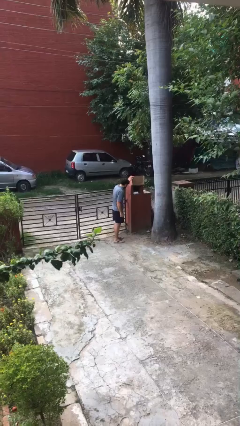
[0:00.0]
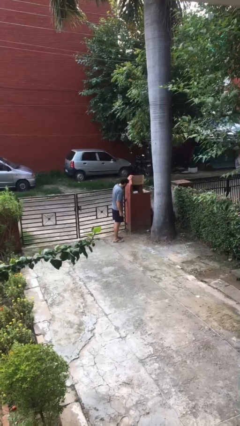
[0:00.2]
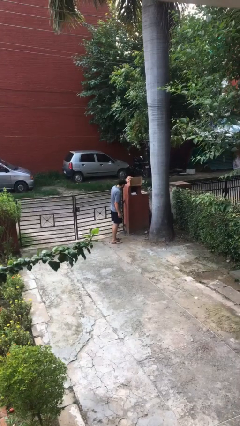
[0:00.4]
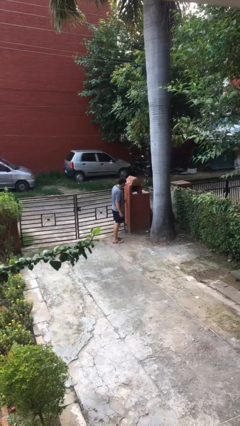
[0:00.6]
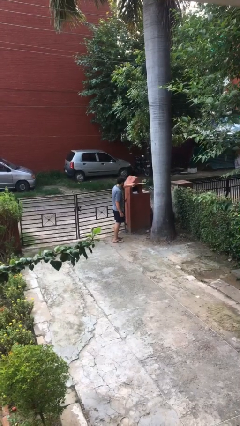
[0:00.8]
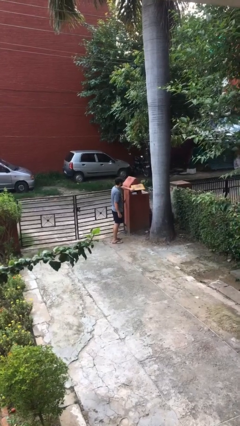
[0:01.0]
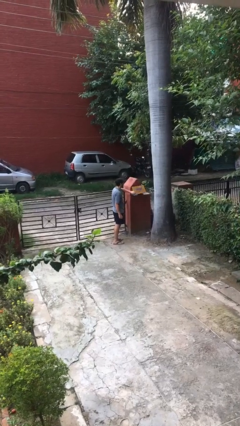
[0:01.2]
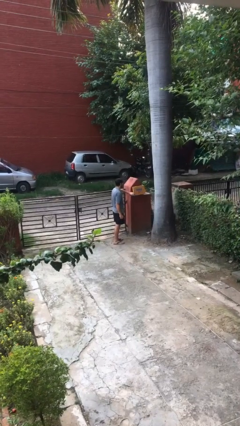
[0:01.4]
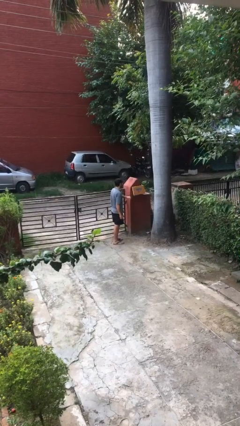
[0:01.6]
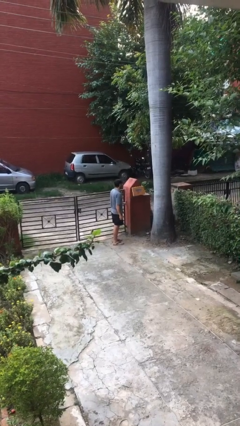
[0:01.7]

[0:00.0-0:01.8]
person closes mailbox

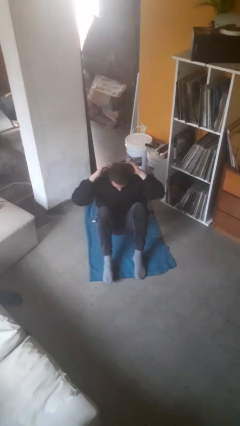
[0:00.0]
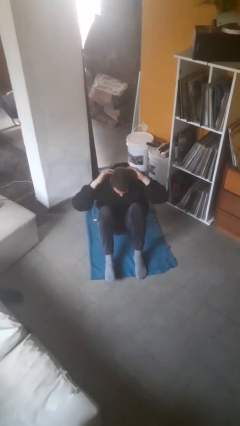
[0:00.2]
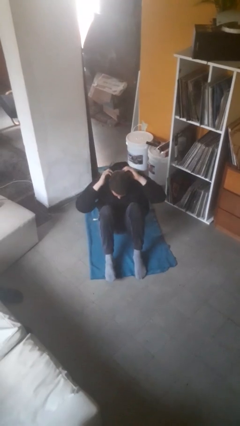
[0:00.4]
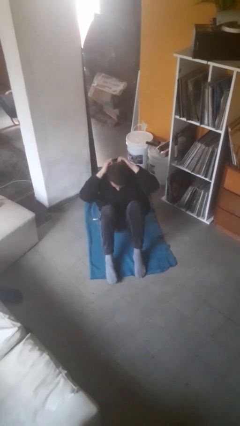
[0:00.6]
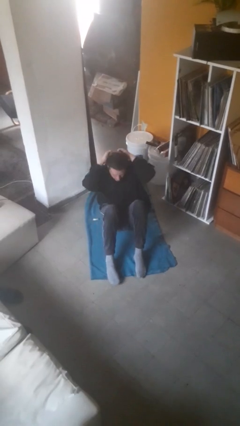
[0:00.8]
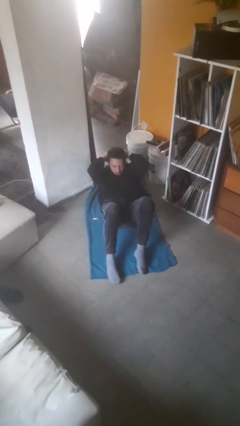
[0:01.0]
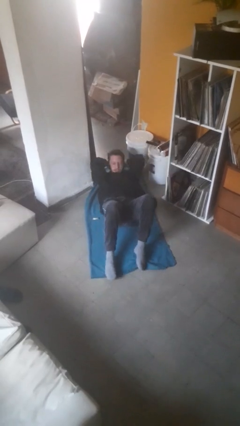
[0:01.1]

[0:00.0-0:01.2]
person exercises with situp

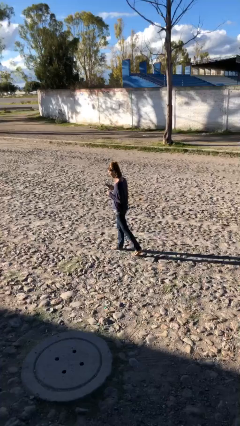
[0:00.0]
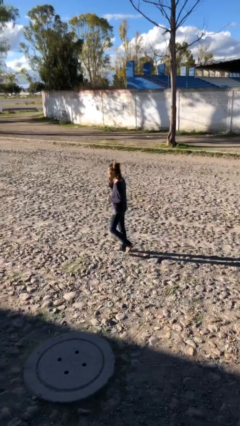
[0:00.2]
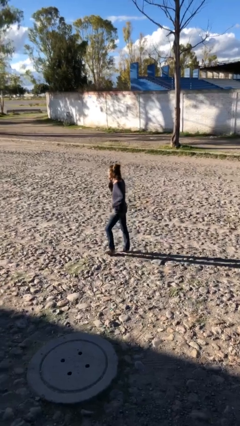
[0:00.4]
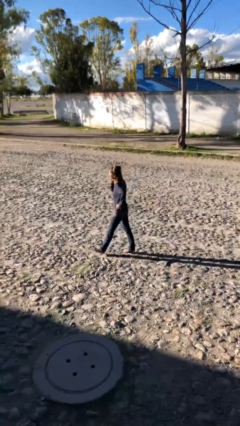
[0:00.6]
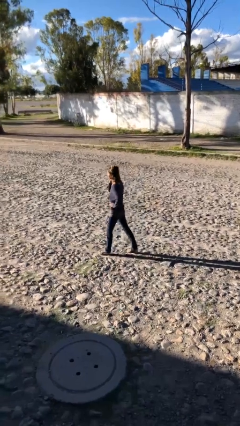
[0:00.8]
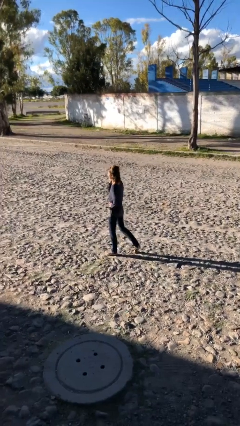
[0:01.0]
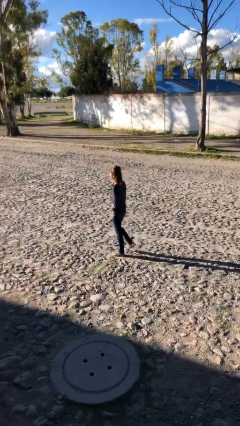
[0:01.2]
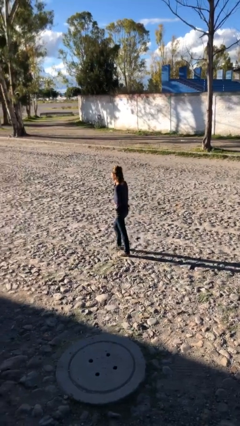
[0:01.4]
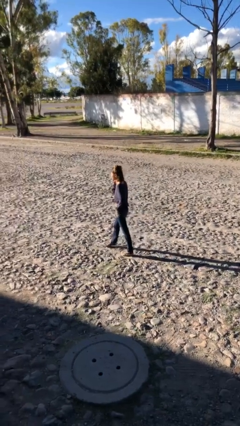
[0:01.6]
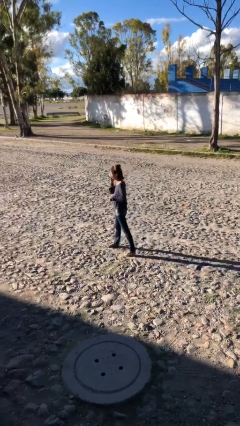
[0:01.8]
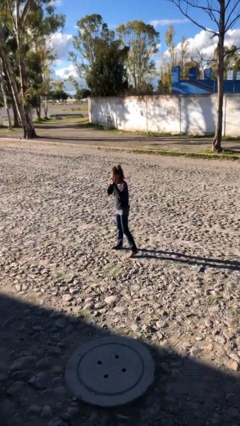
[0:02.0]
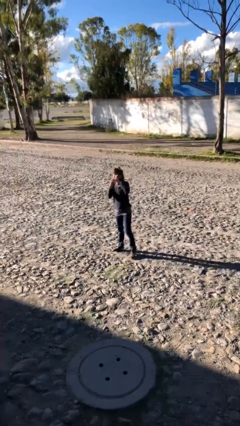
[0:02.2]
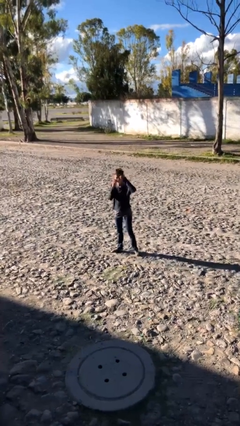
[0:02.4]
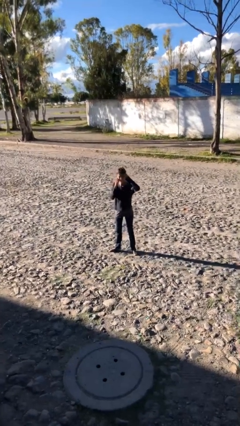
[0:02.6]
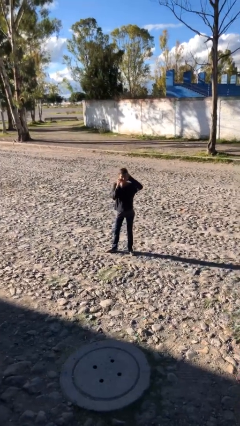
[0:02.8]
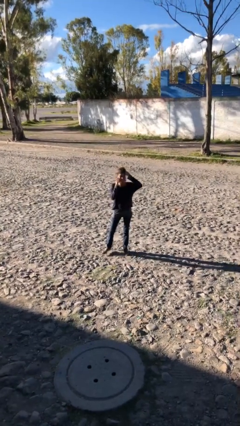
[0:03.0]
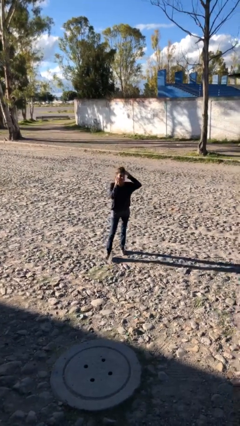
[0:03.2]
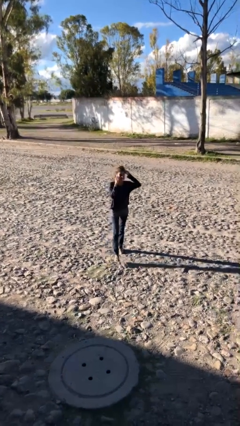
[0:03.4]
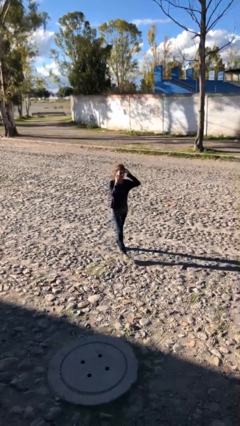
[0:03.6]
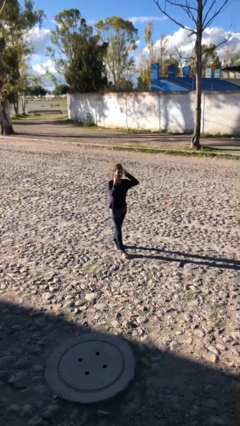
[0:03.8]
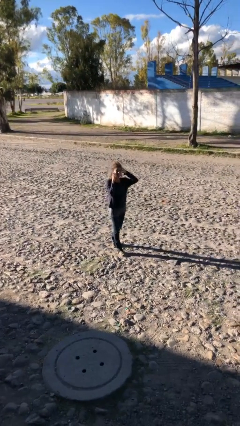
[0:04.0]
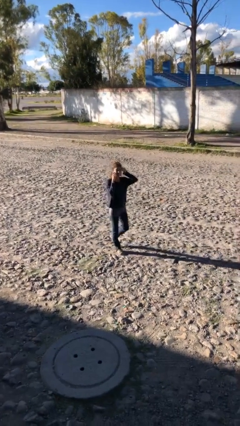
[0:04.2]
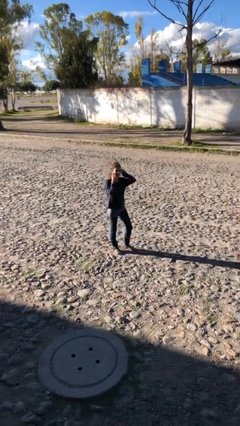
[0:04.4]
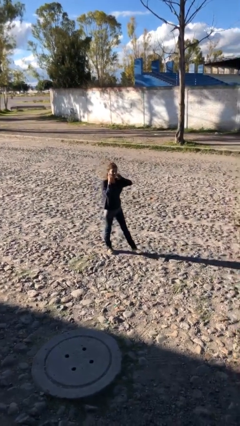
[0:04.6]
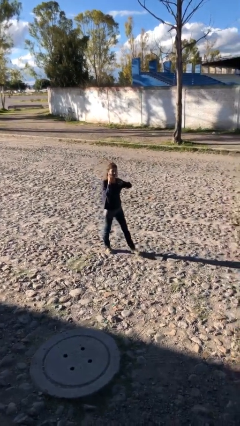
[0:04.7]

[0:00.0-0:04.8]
person talks on phone

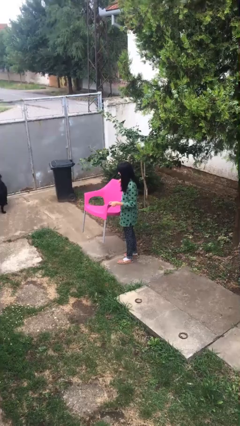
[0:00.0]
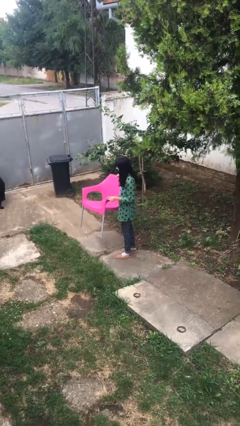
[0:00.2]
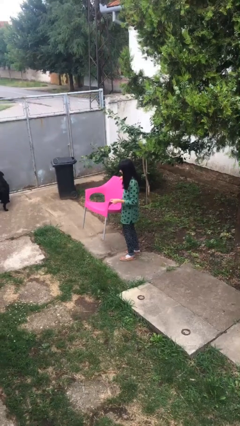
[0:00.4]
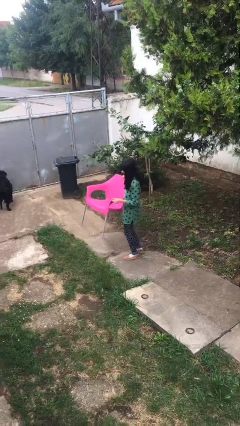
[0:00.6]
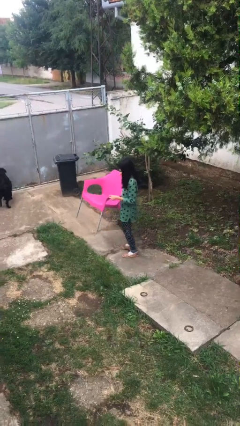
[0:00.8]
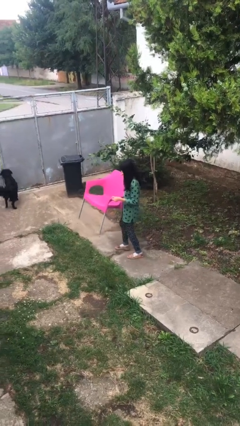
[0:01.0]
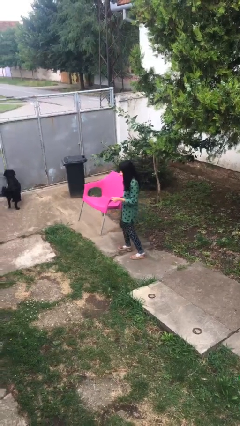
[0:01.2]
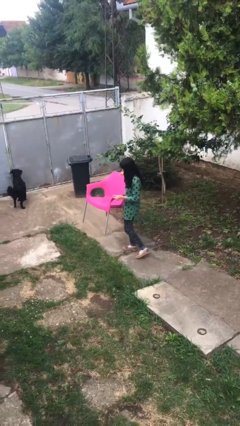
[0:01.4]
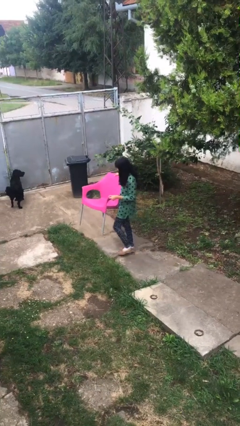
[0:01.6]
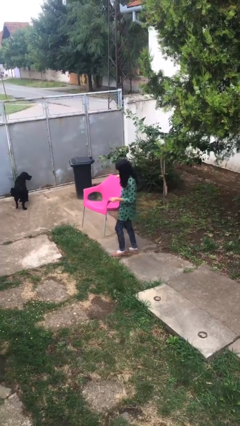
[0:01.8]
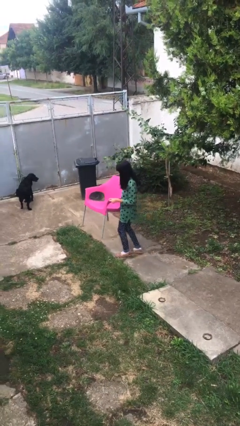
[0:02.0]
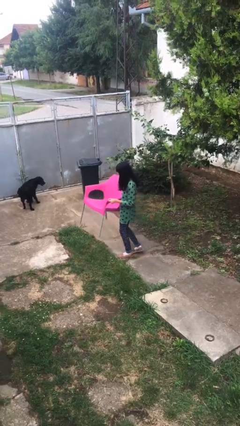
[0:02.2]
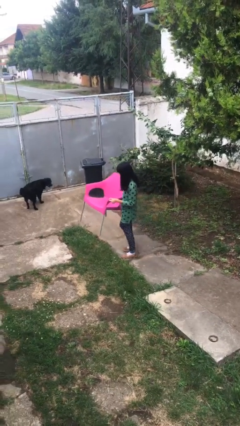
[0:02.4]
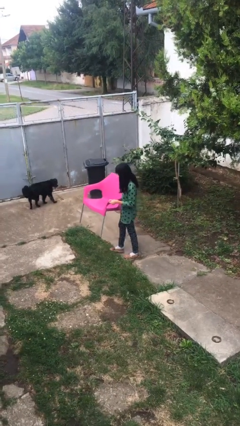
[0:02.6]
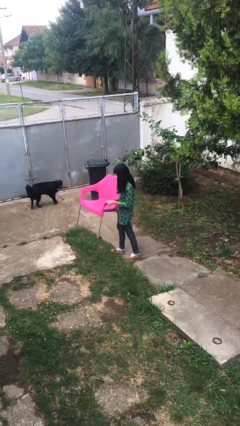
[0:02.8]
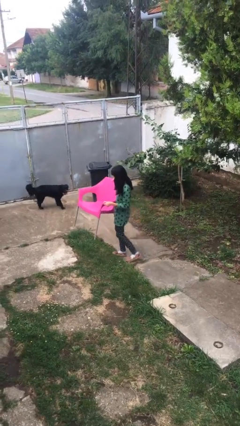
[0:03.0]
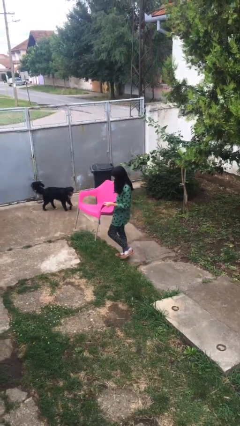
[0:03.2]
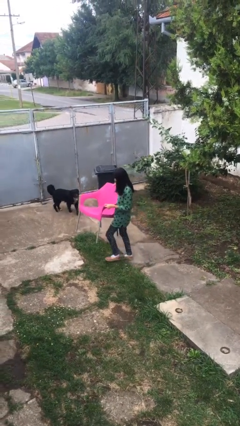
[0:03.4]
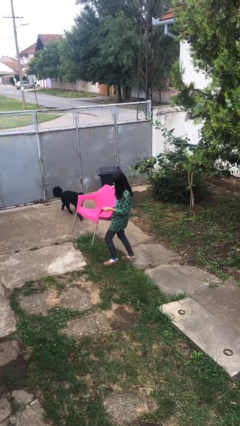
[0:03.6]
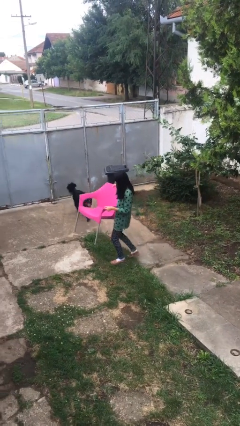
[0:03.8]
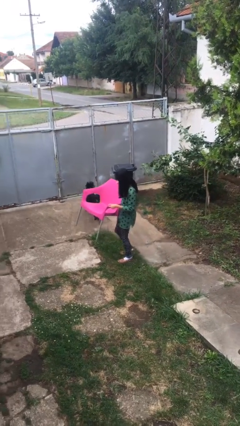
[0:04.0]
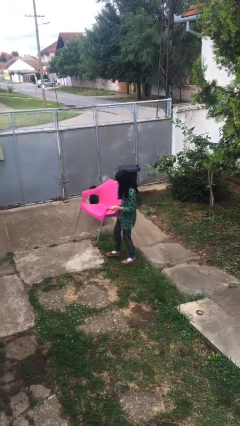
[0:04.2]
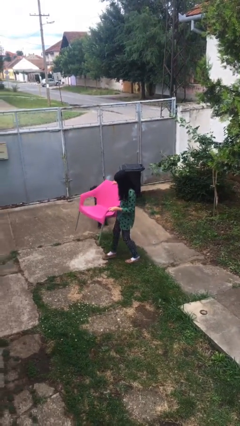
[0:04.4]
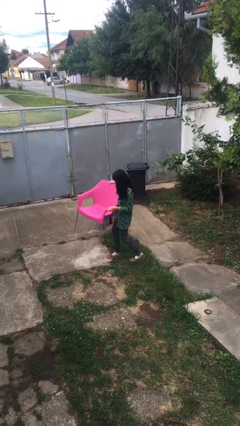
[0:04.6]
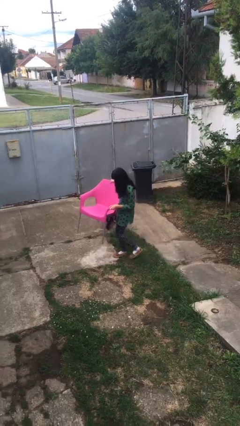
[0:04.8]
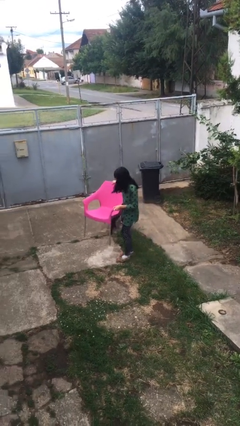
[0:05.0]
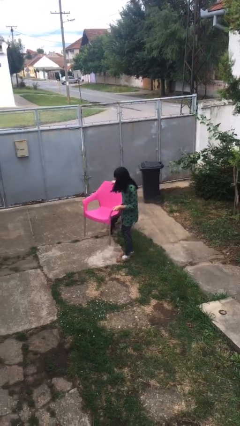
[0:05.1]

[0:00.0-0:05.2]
person carries heavy object

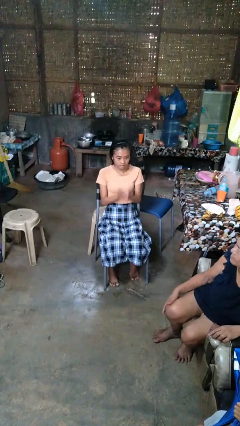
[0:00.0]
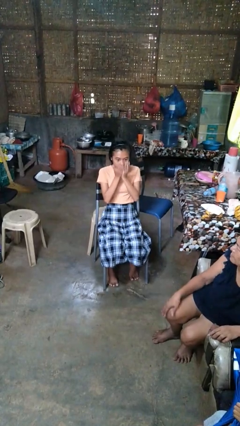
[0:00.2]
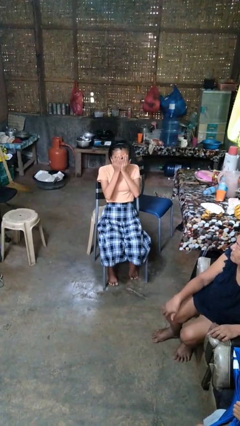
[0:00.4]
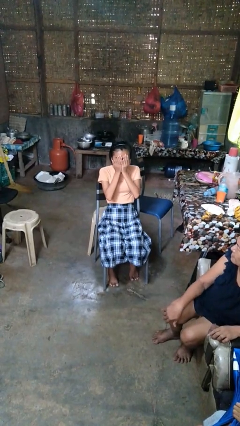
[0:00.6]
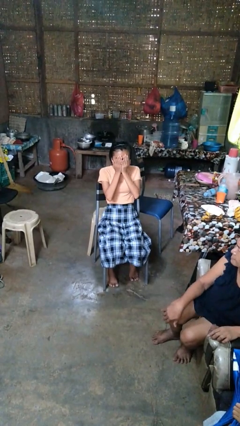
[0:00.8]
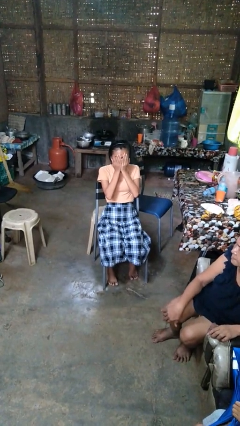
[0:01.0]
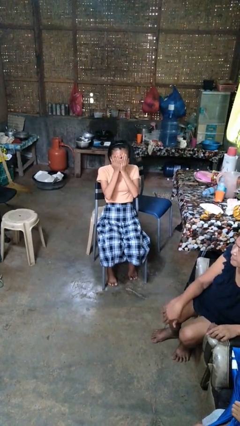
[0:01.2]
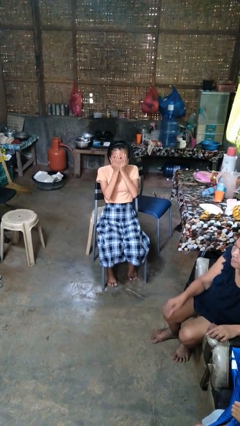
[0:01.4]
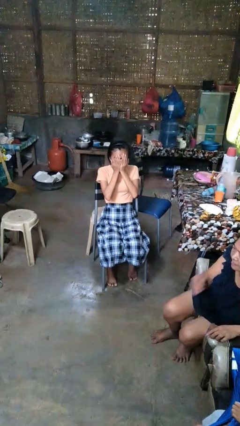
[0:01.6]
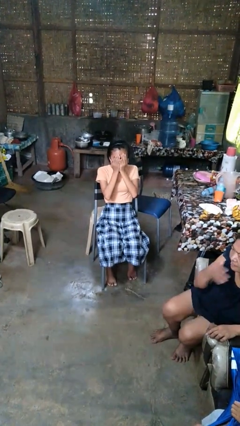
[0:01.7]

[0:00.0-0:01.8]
person covers face with hands

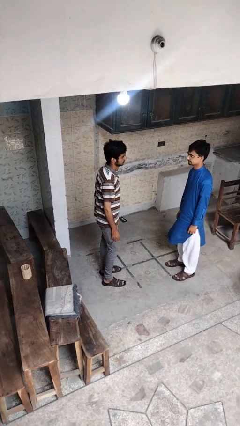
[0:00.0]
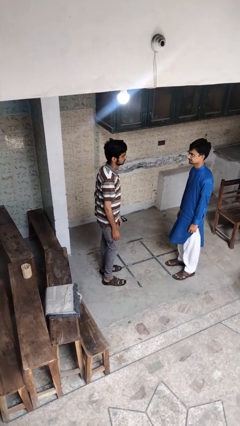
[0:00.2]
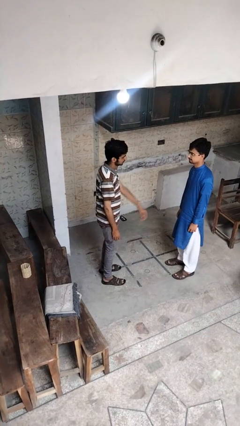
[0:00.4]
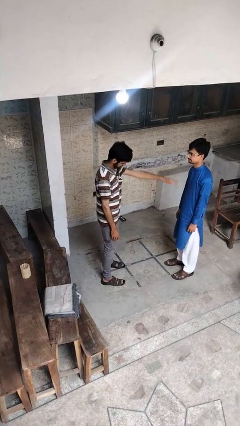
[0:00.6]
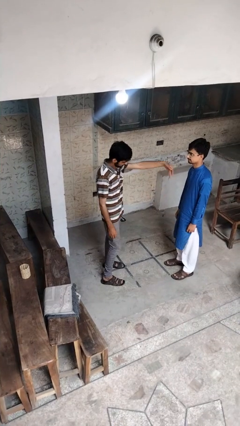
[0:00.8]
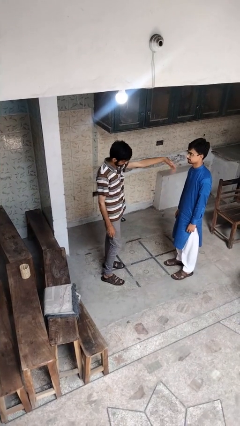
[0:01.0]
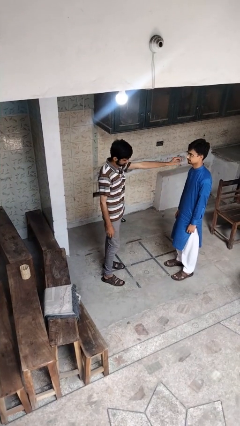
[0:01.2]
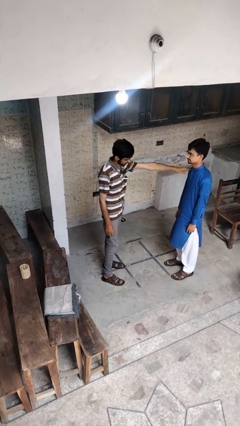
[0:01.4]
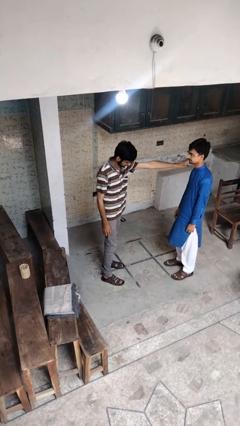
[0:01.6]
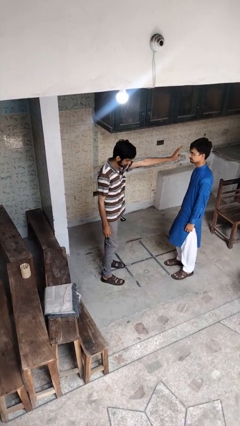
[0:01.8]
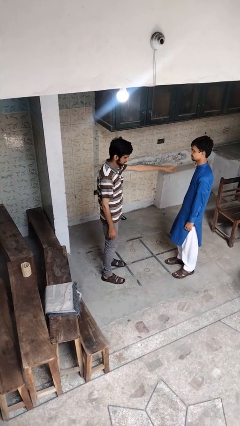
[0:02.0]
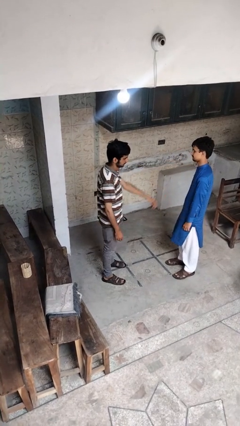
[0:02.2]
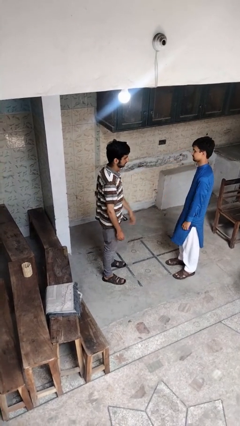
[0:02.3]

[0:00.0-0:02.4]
person shoves person

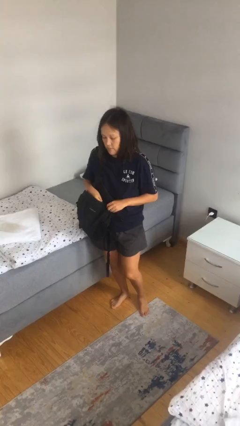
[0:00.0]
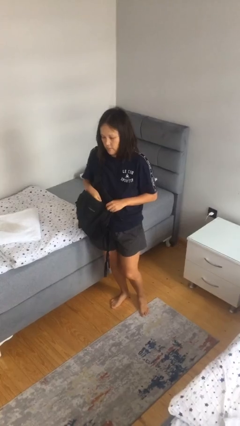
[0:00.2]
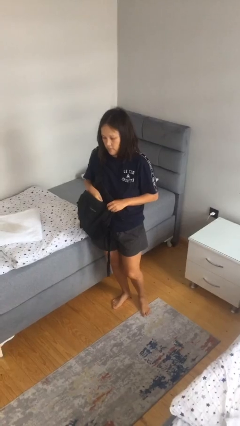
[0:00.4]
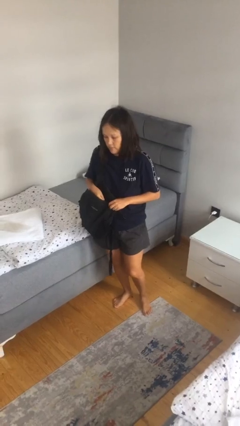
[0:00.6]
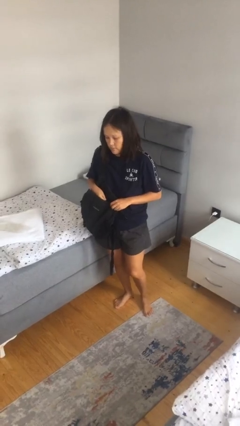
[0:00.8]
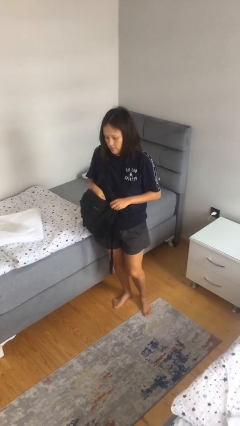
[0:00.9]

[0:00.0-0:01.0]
person searches in backpack
